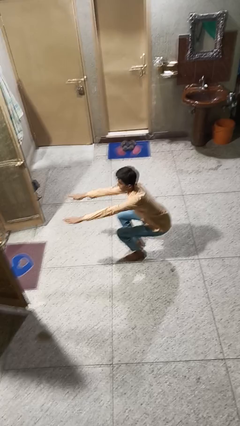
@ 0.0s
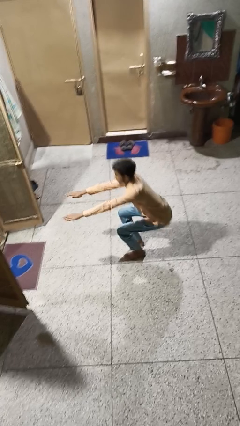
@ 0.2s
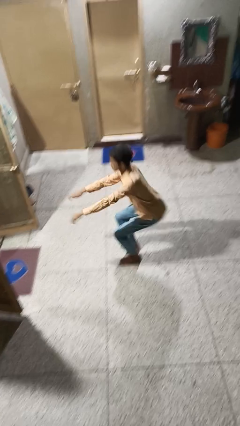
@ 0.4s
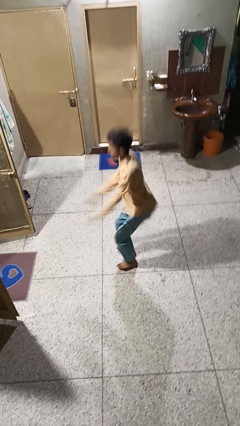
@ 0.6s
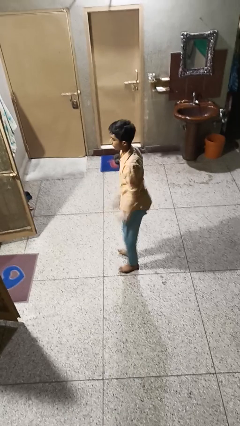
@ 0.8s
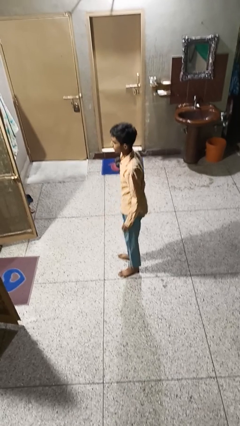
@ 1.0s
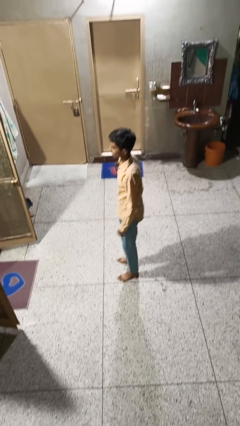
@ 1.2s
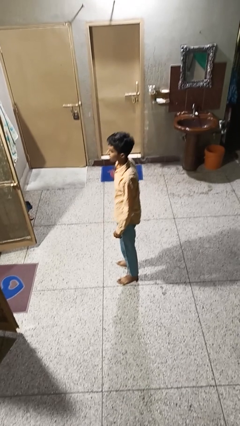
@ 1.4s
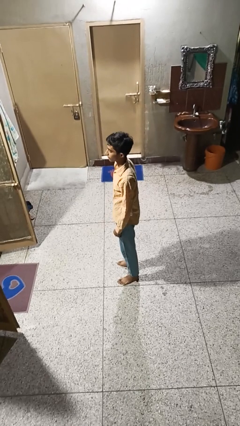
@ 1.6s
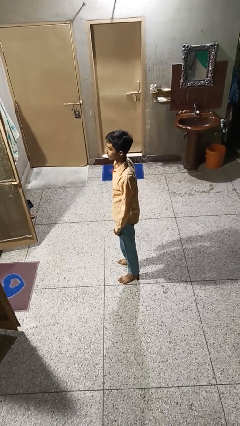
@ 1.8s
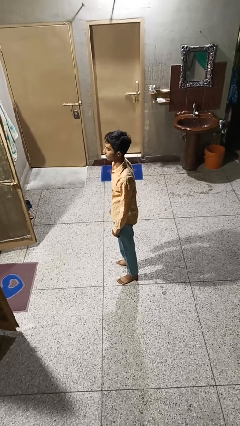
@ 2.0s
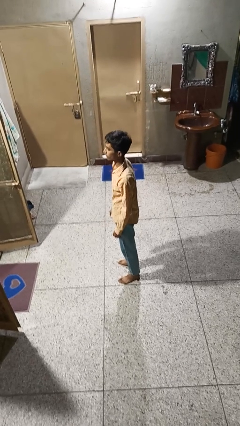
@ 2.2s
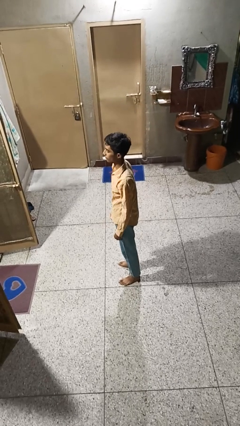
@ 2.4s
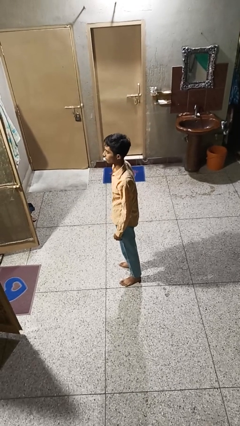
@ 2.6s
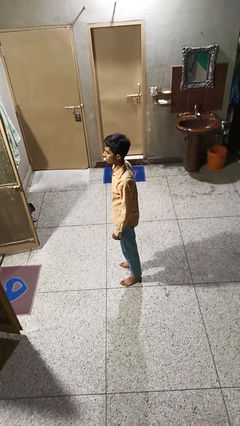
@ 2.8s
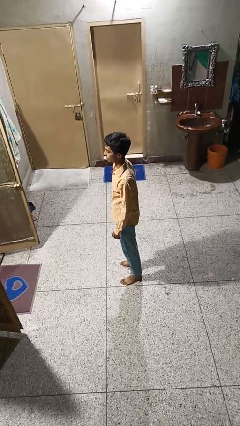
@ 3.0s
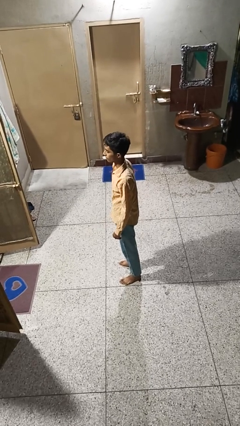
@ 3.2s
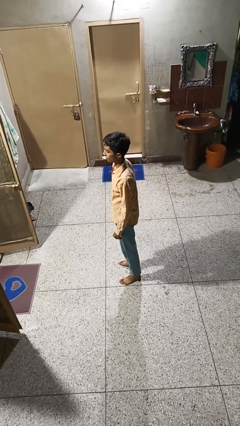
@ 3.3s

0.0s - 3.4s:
person stands up

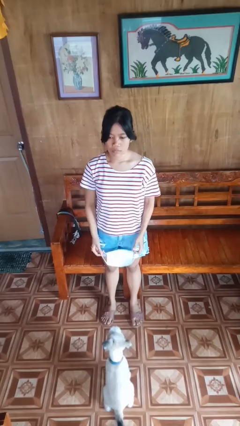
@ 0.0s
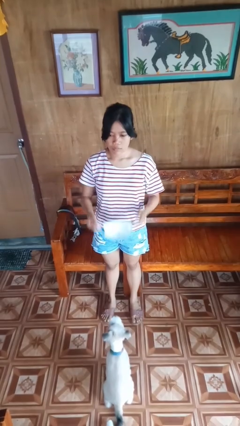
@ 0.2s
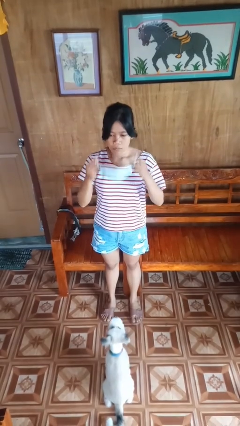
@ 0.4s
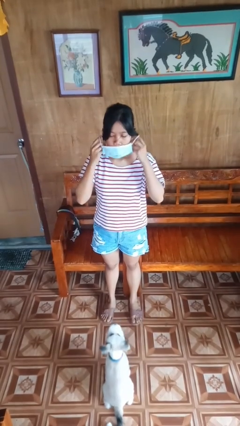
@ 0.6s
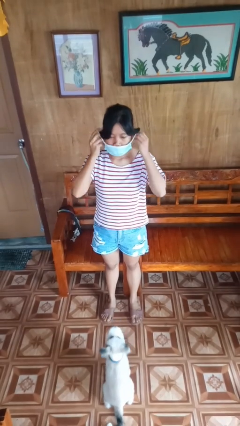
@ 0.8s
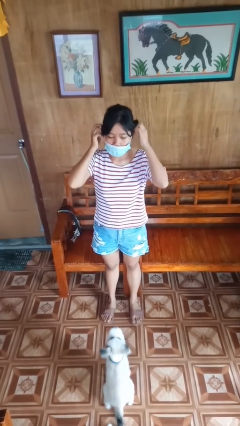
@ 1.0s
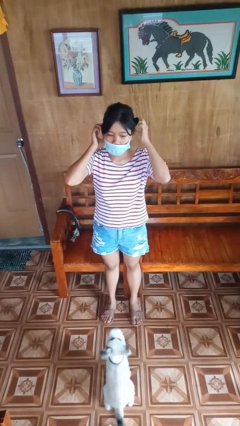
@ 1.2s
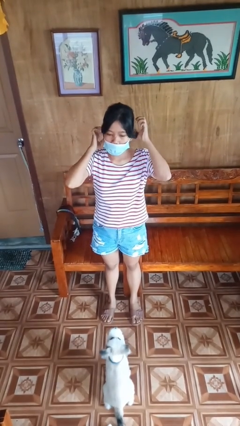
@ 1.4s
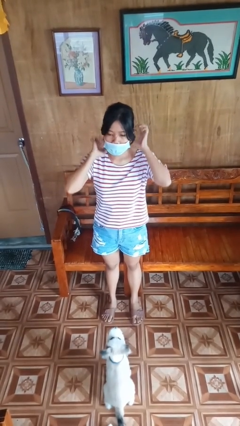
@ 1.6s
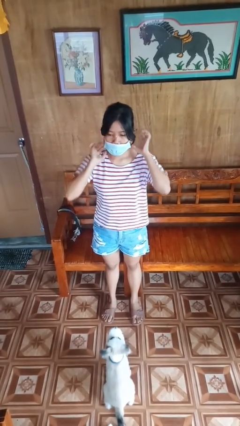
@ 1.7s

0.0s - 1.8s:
person puts on facemask

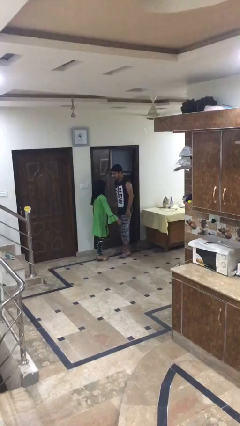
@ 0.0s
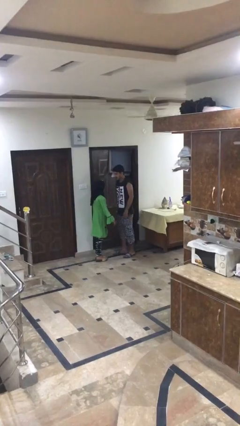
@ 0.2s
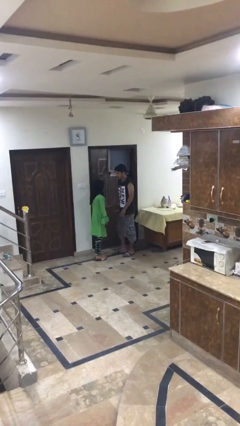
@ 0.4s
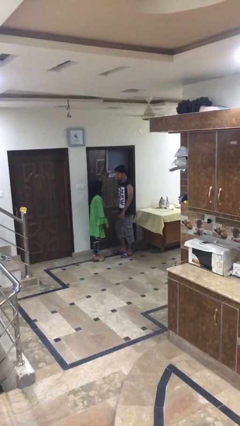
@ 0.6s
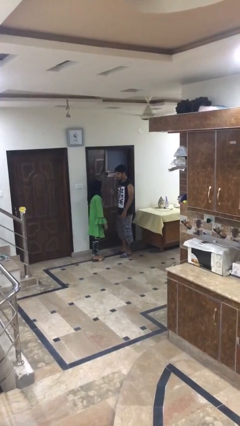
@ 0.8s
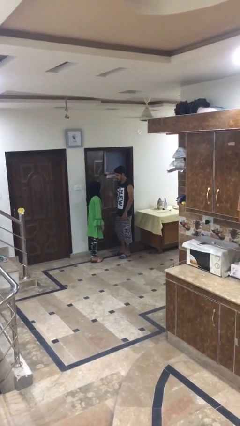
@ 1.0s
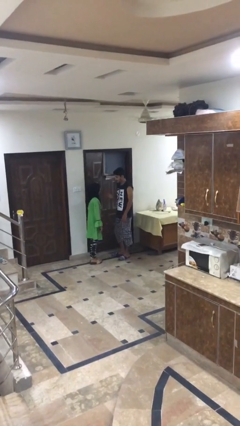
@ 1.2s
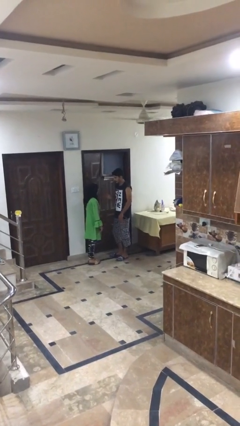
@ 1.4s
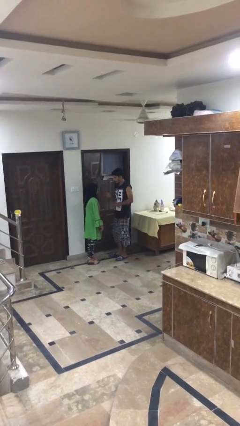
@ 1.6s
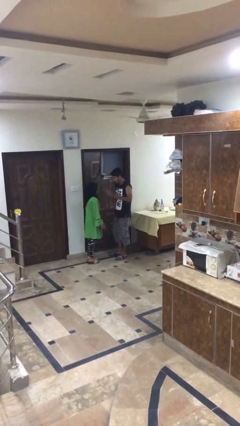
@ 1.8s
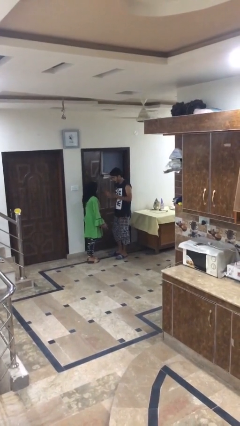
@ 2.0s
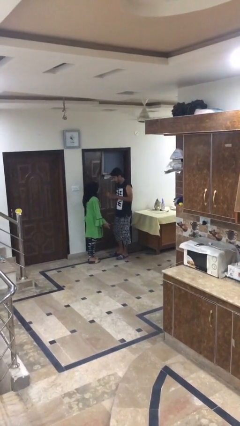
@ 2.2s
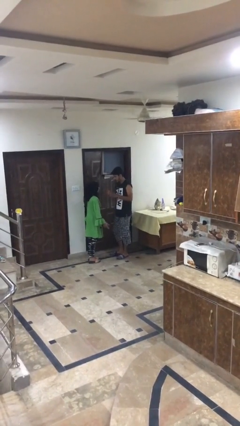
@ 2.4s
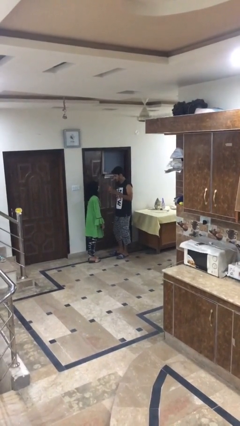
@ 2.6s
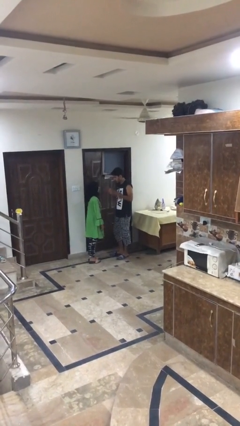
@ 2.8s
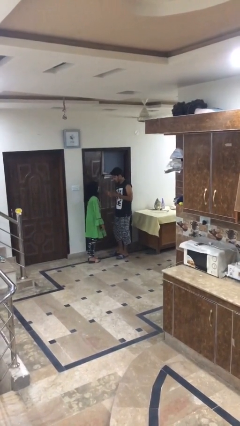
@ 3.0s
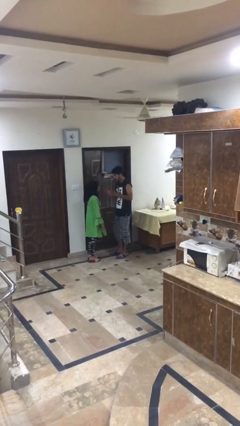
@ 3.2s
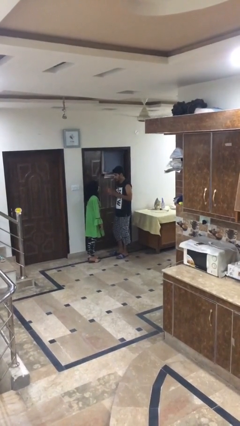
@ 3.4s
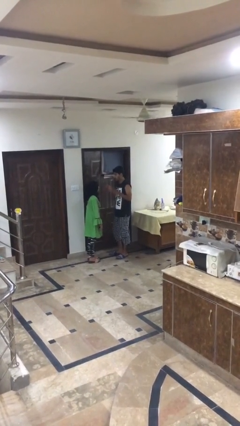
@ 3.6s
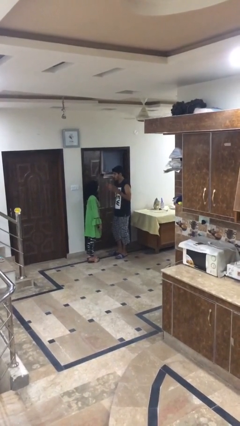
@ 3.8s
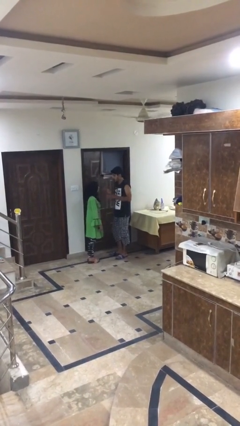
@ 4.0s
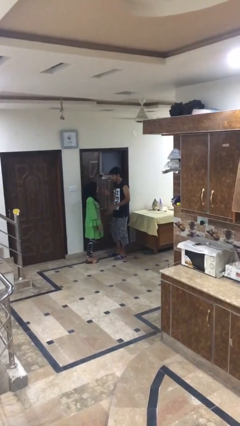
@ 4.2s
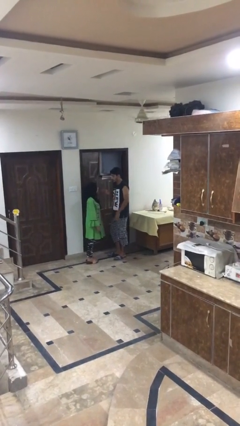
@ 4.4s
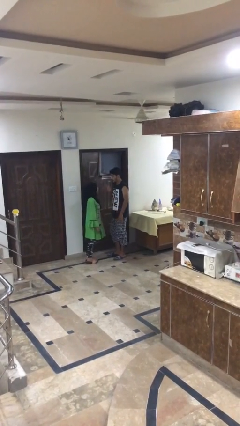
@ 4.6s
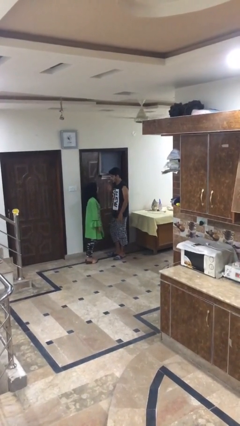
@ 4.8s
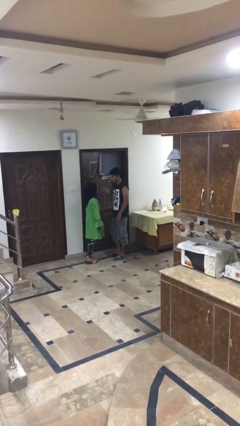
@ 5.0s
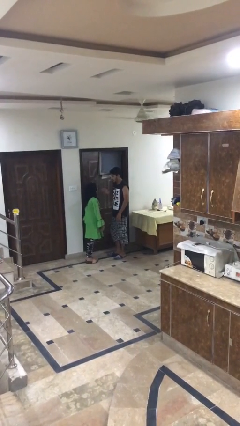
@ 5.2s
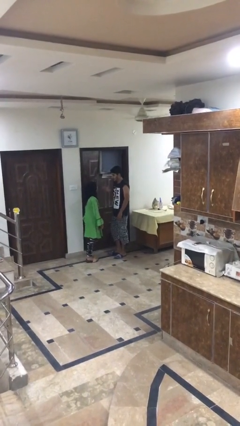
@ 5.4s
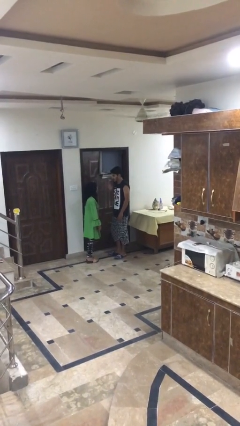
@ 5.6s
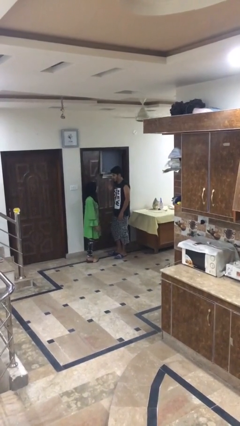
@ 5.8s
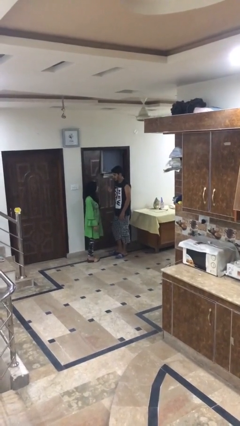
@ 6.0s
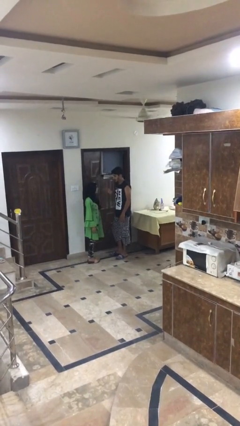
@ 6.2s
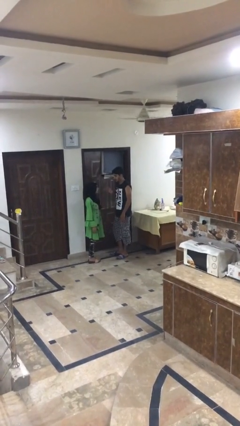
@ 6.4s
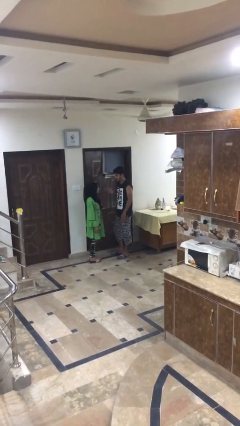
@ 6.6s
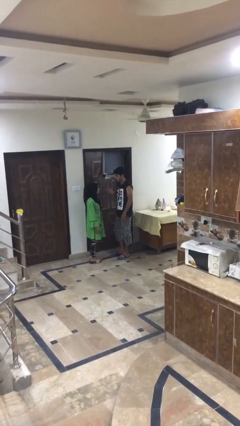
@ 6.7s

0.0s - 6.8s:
person talks to person

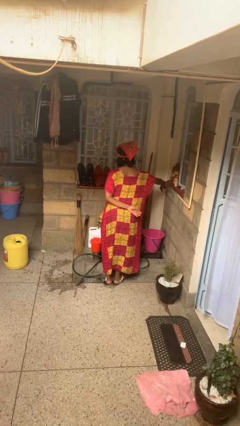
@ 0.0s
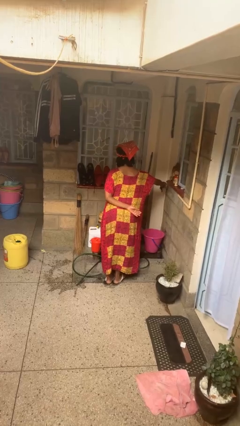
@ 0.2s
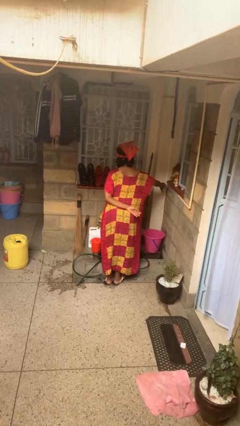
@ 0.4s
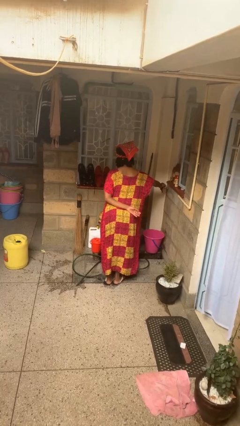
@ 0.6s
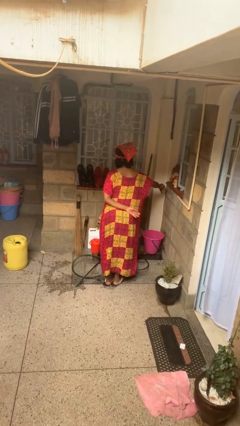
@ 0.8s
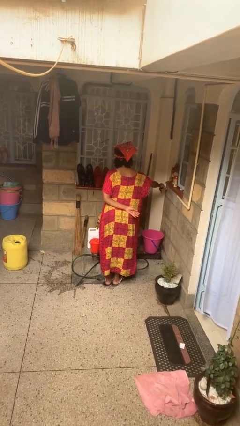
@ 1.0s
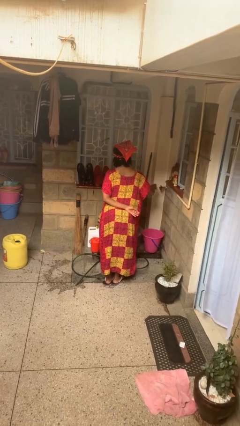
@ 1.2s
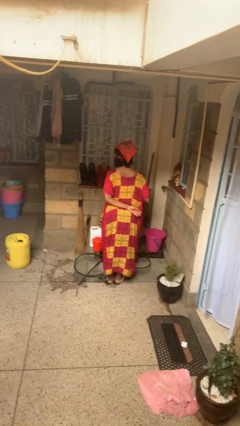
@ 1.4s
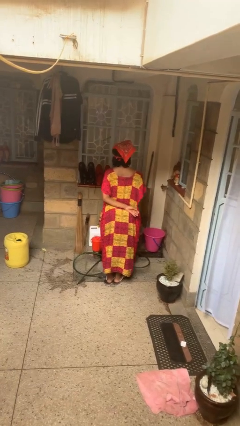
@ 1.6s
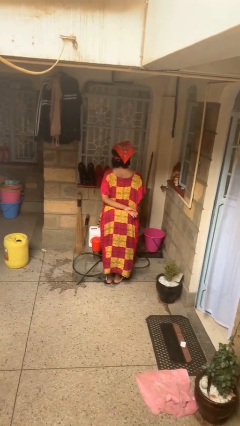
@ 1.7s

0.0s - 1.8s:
person turns off faucet

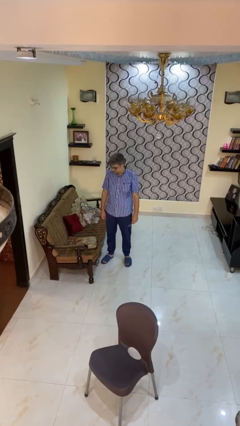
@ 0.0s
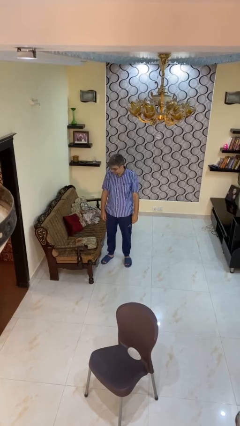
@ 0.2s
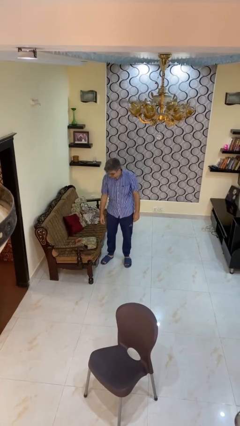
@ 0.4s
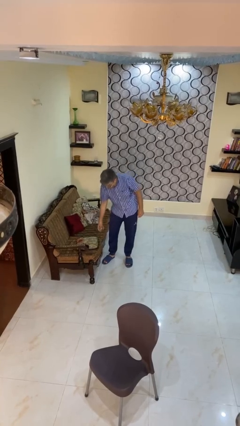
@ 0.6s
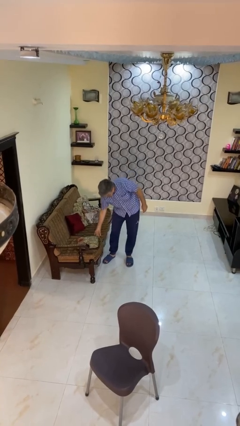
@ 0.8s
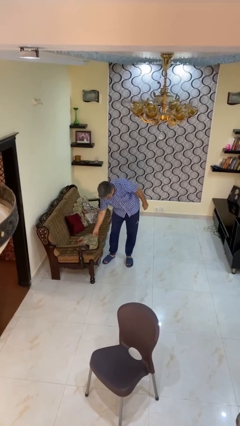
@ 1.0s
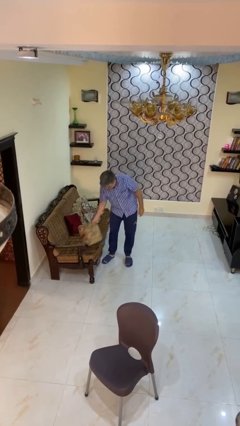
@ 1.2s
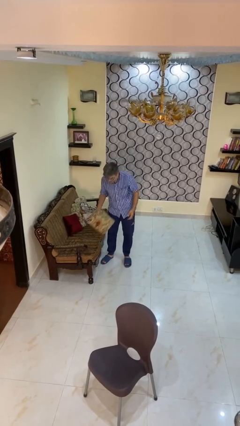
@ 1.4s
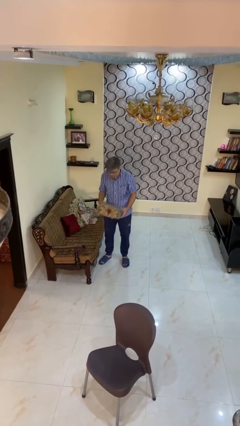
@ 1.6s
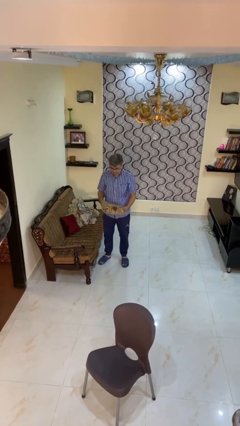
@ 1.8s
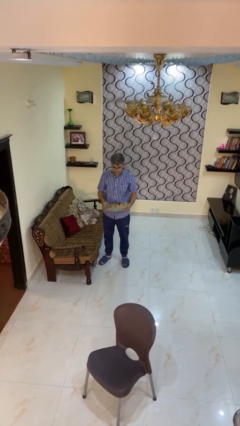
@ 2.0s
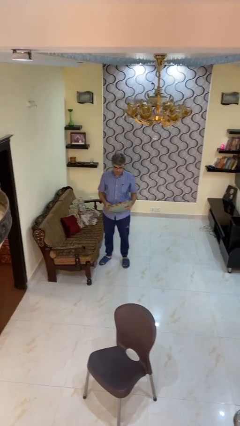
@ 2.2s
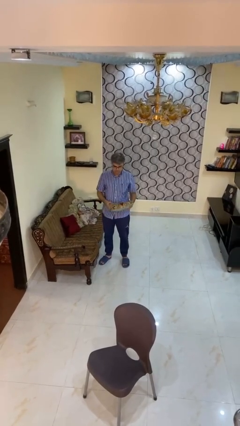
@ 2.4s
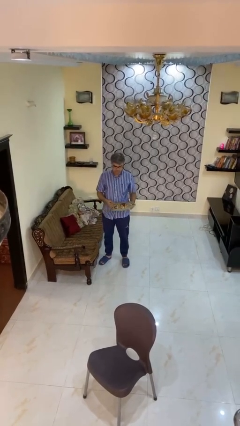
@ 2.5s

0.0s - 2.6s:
person picks up object from couch

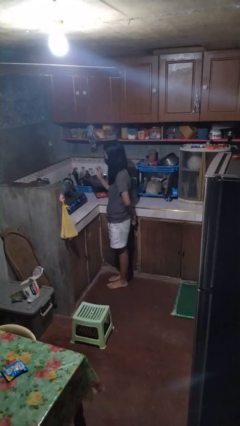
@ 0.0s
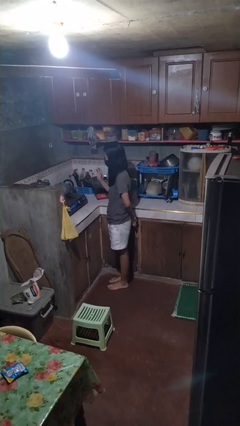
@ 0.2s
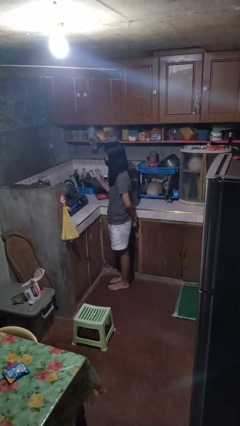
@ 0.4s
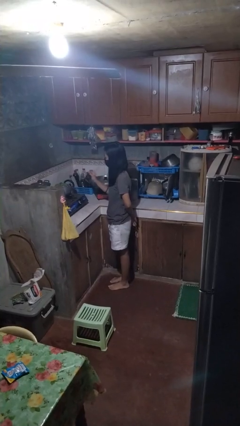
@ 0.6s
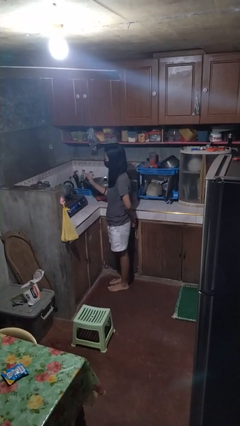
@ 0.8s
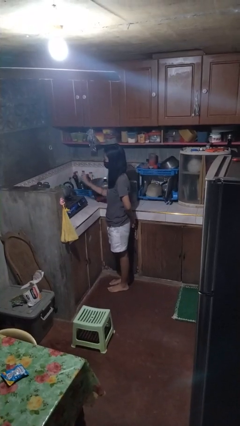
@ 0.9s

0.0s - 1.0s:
person burns hand
